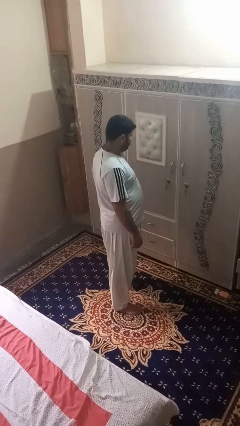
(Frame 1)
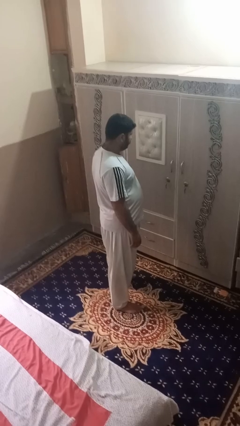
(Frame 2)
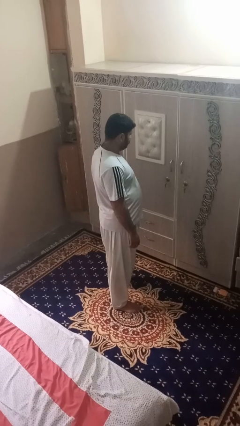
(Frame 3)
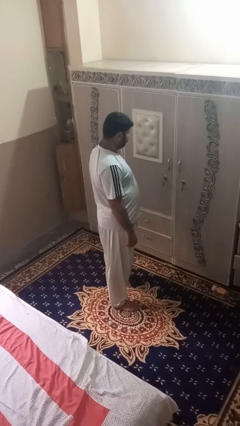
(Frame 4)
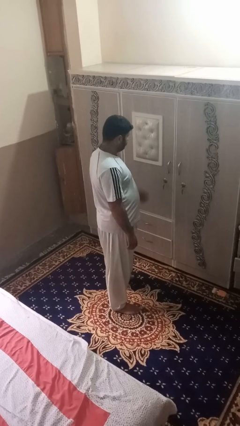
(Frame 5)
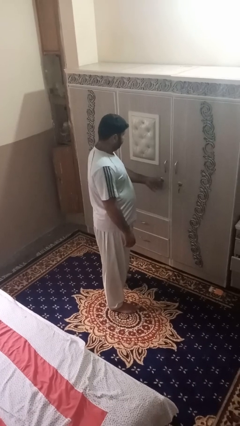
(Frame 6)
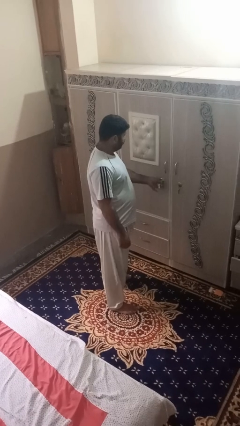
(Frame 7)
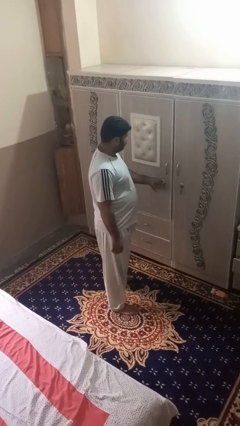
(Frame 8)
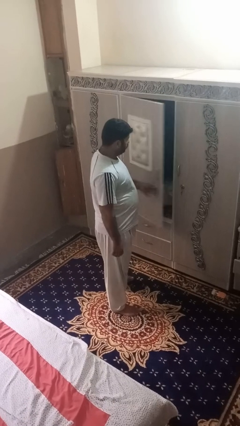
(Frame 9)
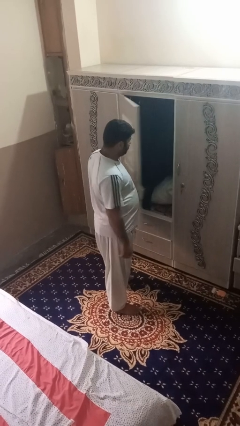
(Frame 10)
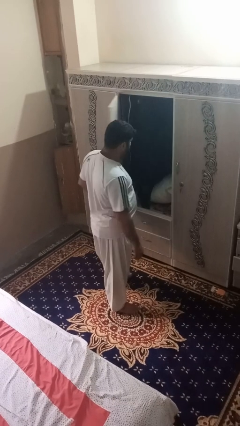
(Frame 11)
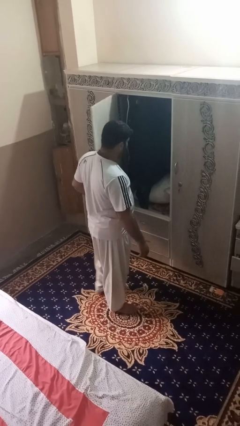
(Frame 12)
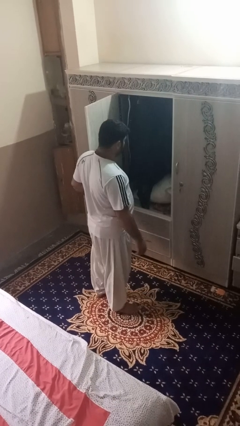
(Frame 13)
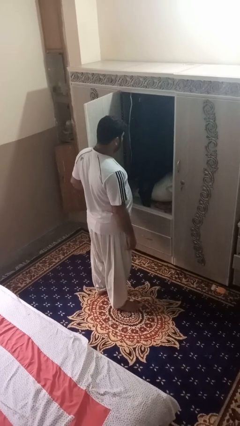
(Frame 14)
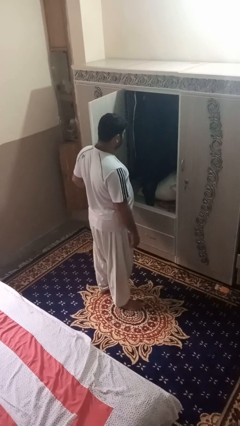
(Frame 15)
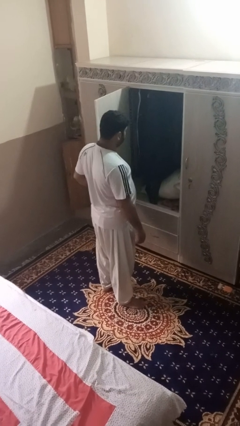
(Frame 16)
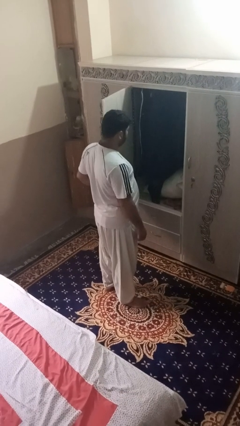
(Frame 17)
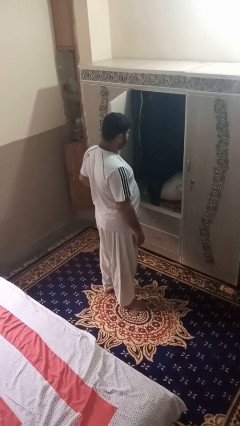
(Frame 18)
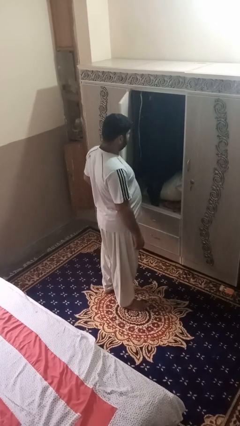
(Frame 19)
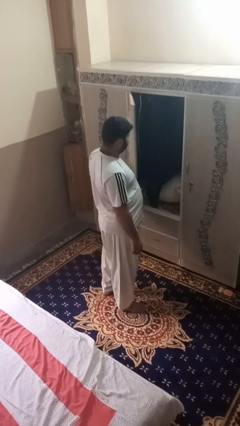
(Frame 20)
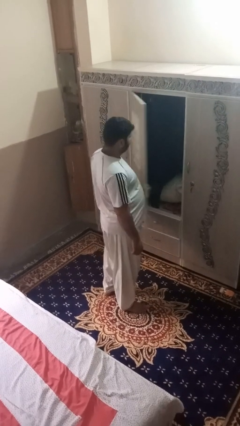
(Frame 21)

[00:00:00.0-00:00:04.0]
person opens dresser drawer

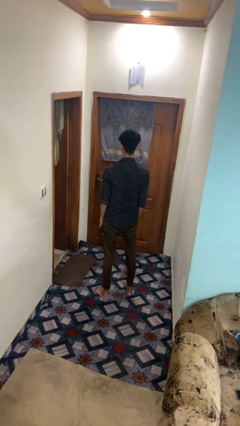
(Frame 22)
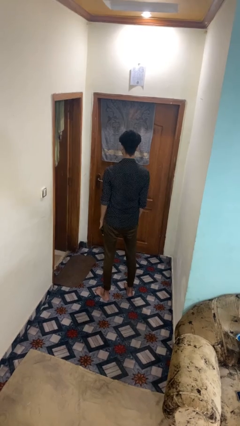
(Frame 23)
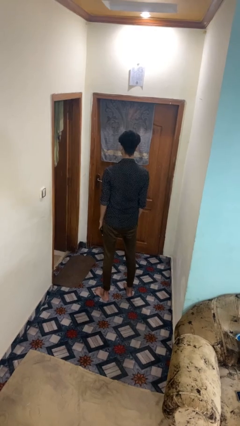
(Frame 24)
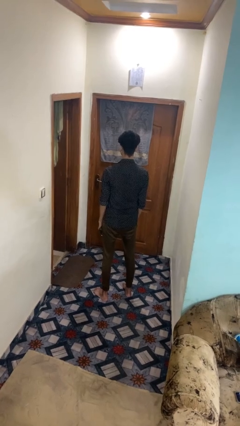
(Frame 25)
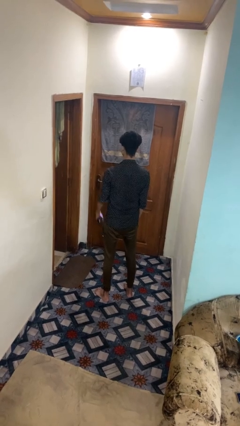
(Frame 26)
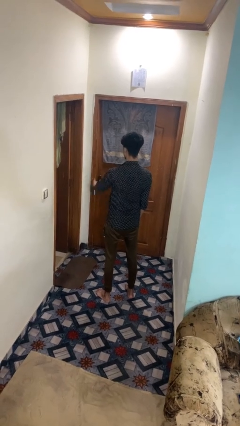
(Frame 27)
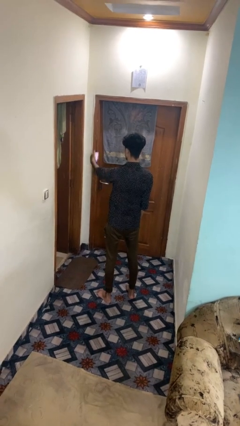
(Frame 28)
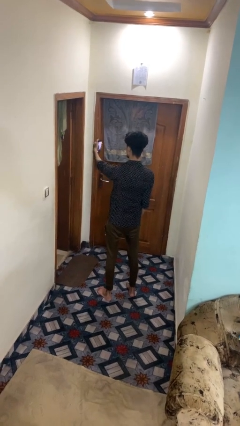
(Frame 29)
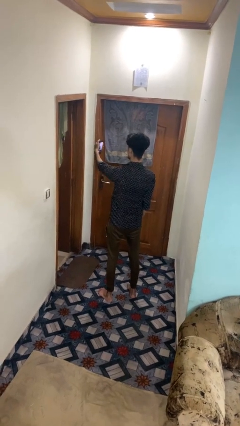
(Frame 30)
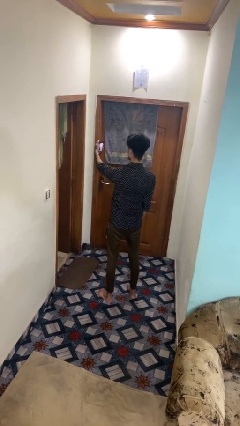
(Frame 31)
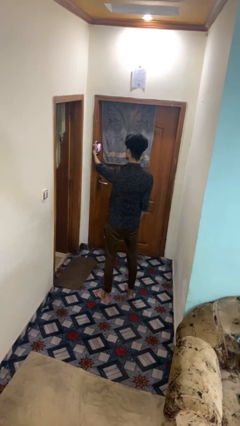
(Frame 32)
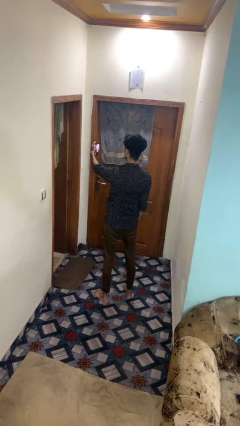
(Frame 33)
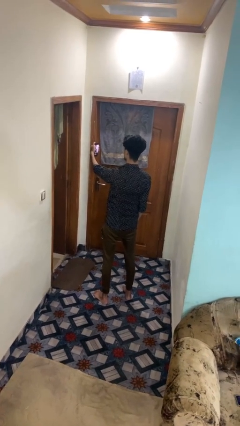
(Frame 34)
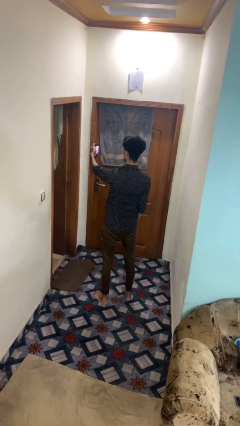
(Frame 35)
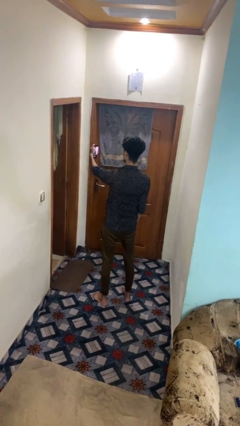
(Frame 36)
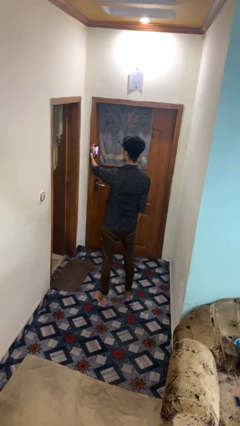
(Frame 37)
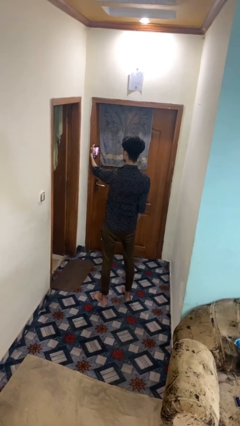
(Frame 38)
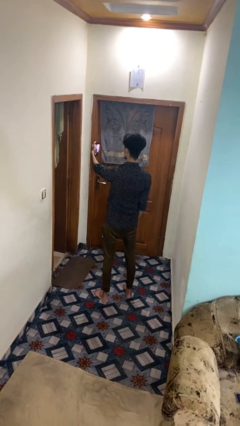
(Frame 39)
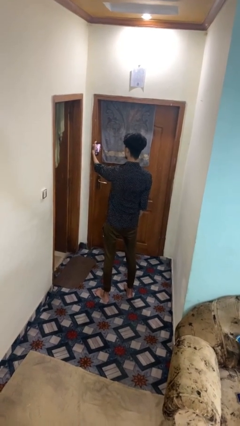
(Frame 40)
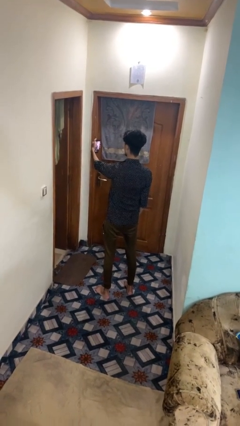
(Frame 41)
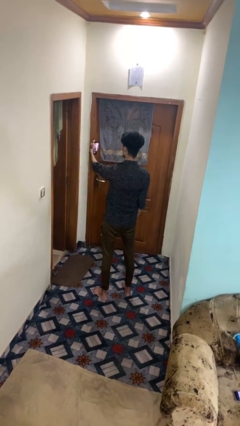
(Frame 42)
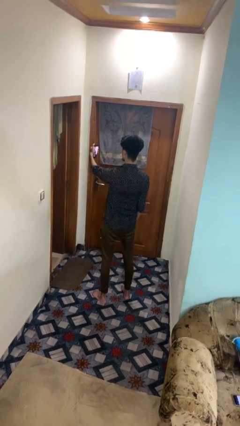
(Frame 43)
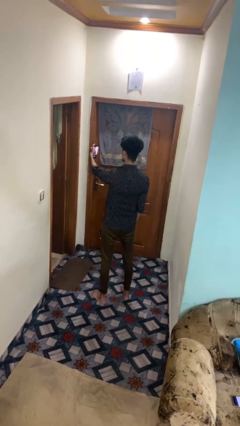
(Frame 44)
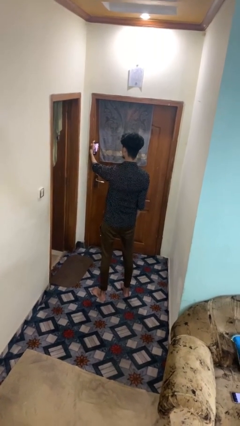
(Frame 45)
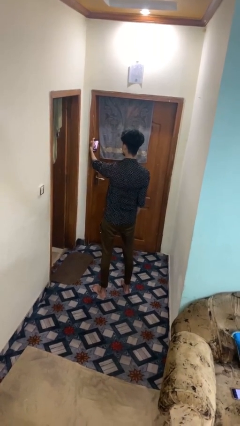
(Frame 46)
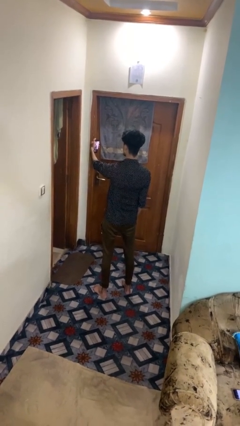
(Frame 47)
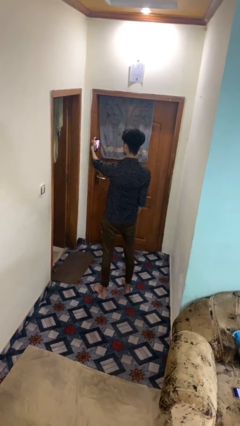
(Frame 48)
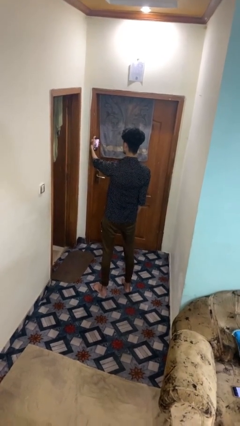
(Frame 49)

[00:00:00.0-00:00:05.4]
person takes selfie

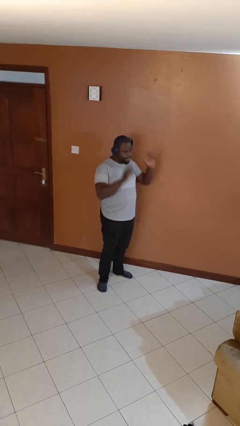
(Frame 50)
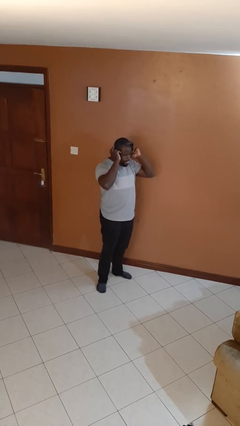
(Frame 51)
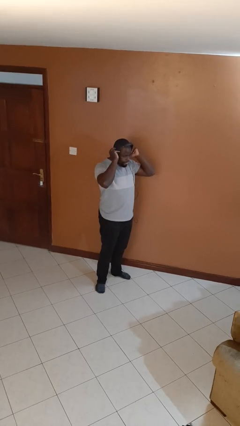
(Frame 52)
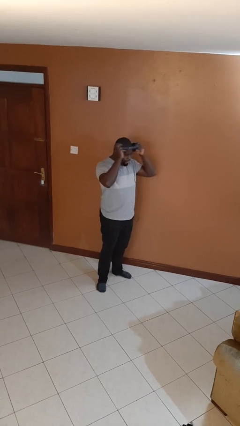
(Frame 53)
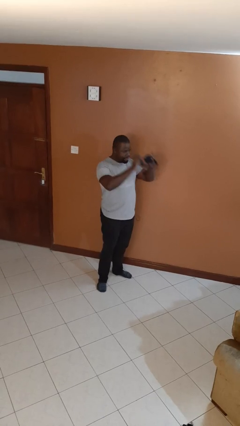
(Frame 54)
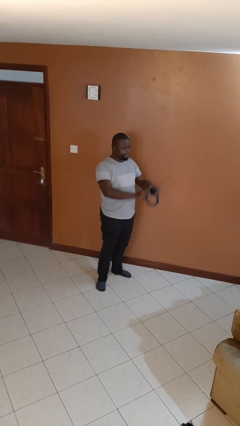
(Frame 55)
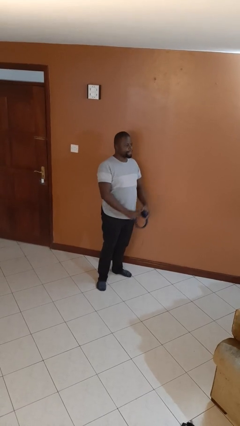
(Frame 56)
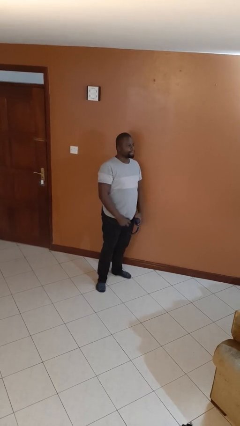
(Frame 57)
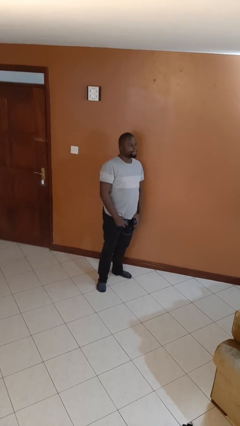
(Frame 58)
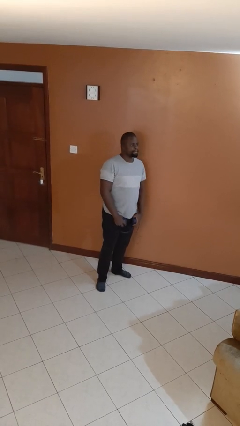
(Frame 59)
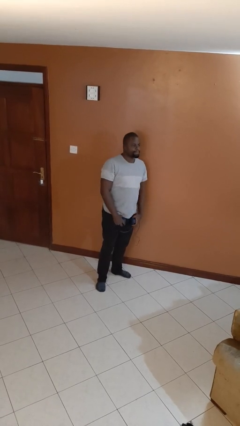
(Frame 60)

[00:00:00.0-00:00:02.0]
person takes off headphones

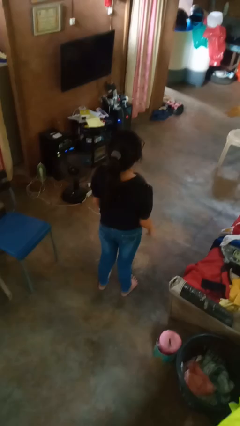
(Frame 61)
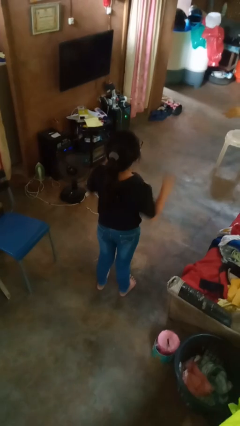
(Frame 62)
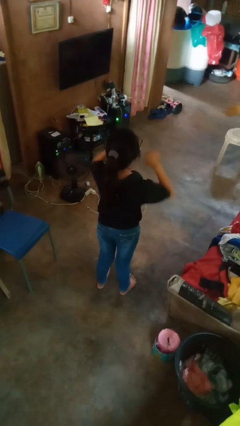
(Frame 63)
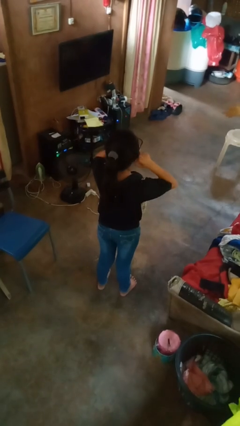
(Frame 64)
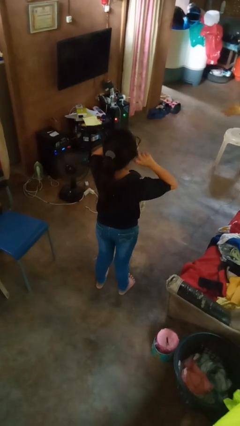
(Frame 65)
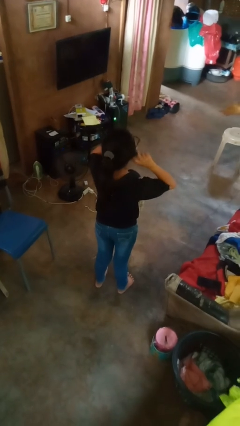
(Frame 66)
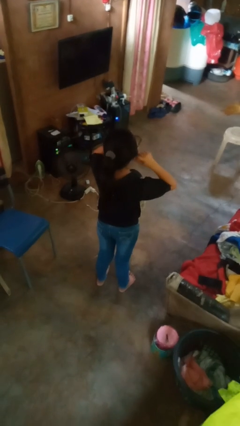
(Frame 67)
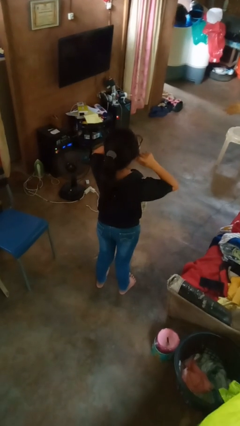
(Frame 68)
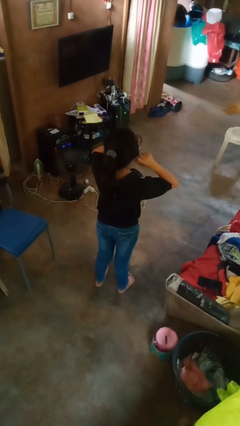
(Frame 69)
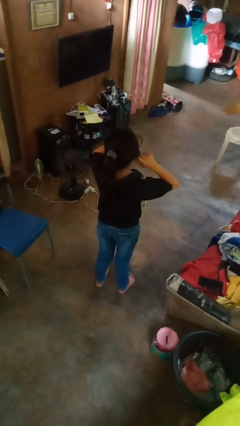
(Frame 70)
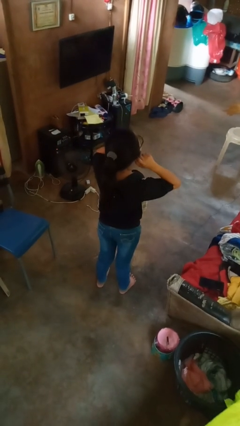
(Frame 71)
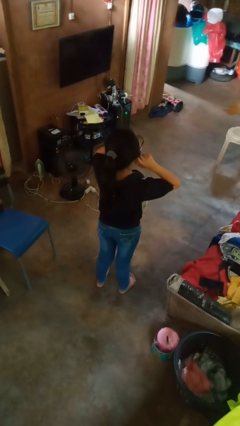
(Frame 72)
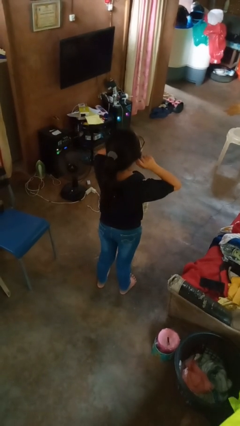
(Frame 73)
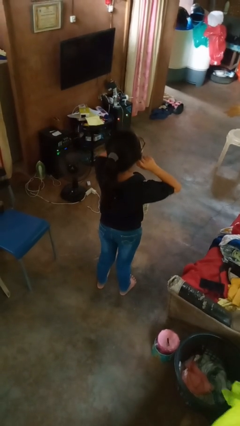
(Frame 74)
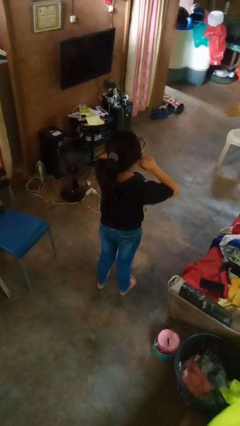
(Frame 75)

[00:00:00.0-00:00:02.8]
person touches earlobe

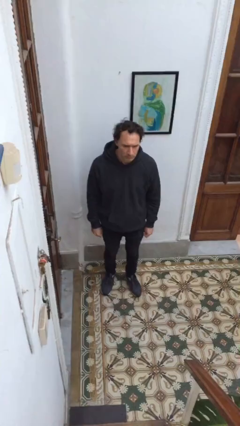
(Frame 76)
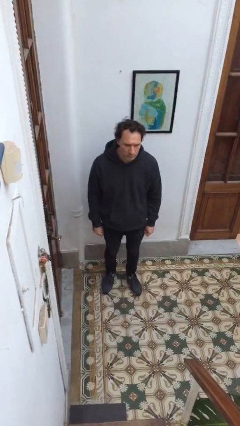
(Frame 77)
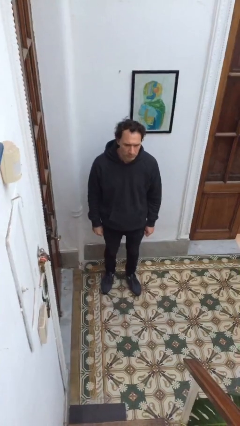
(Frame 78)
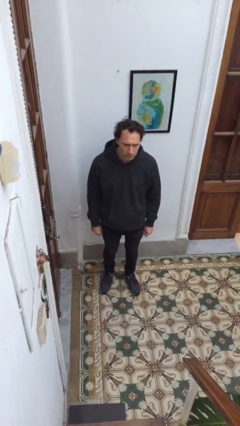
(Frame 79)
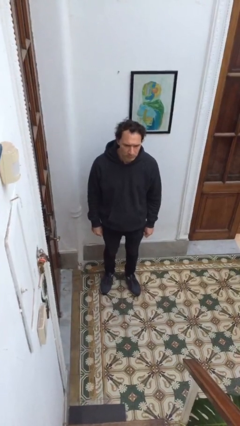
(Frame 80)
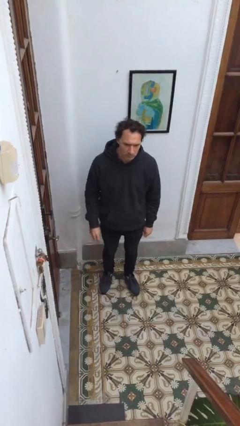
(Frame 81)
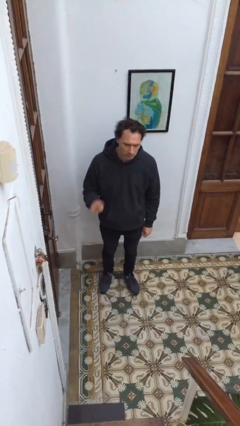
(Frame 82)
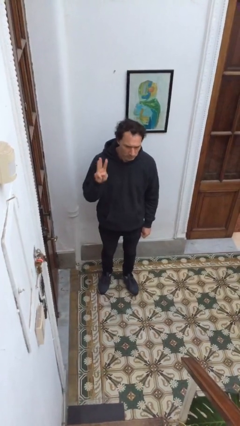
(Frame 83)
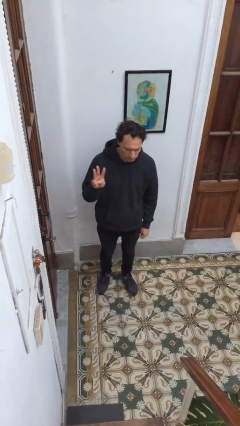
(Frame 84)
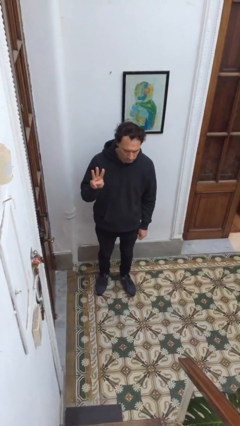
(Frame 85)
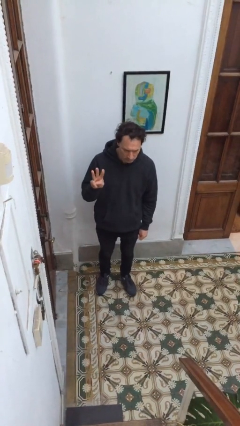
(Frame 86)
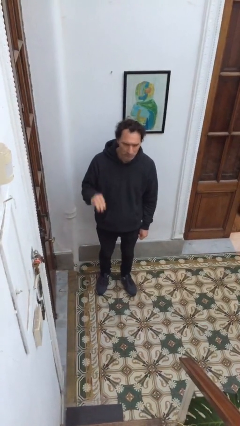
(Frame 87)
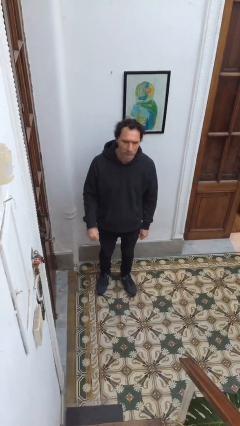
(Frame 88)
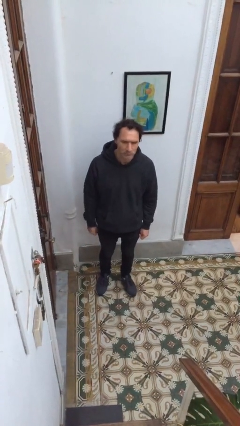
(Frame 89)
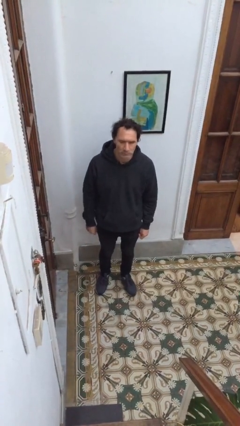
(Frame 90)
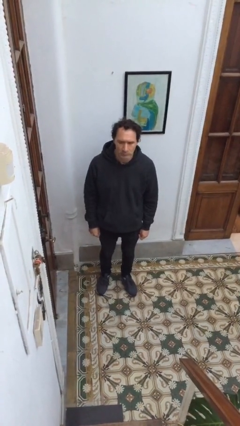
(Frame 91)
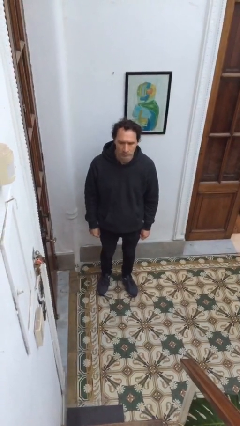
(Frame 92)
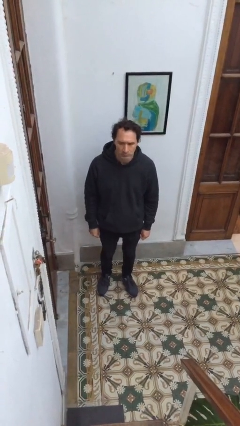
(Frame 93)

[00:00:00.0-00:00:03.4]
person gestures number three

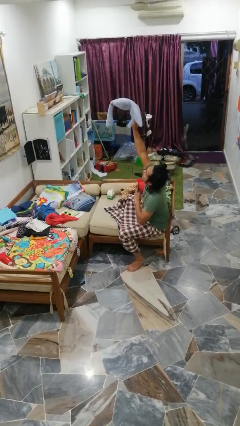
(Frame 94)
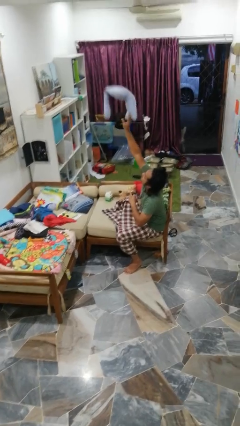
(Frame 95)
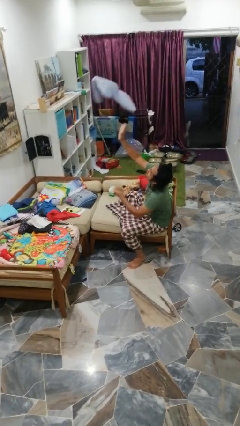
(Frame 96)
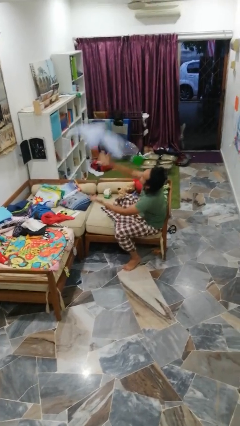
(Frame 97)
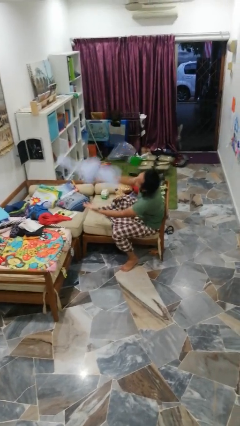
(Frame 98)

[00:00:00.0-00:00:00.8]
person drops object
